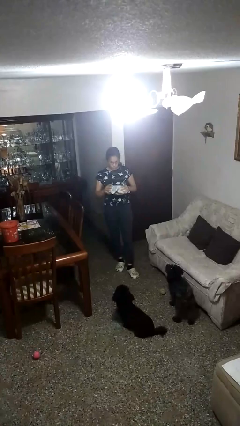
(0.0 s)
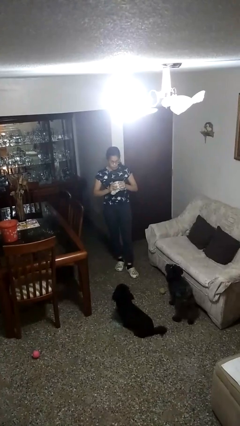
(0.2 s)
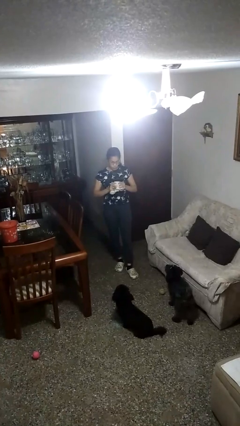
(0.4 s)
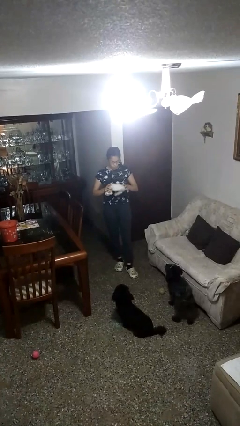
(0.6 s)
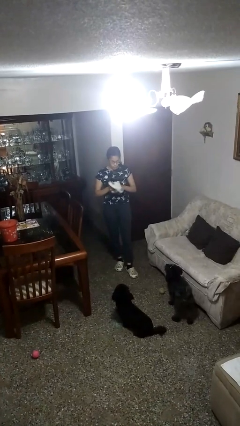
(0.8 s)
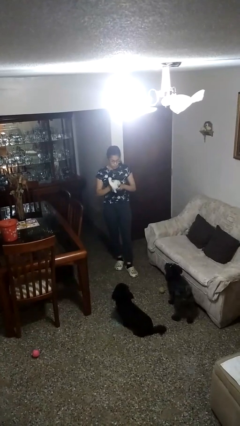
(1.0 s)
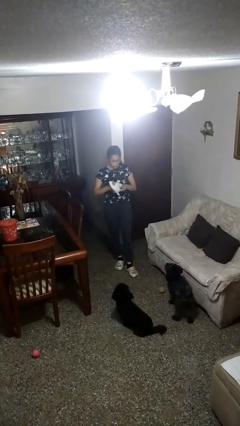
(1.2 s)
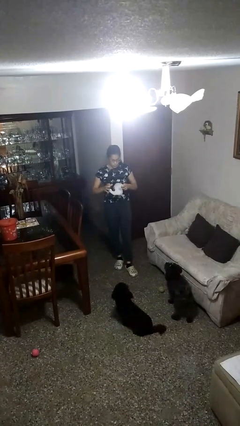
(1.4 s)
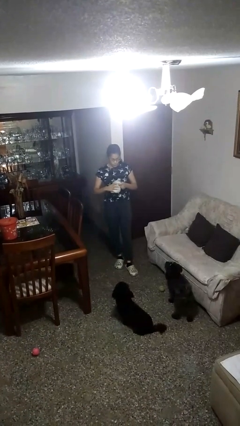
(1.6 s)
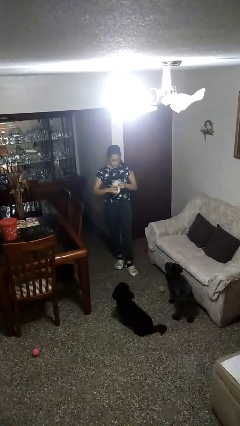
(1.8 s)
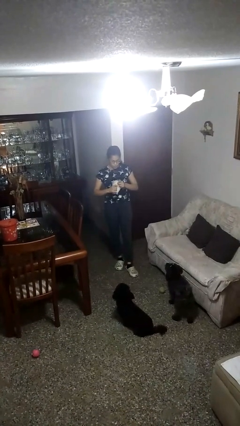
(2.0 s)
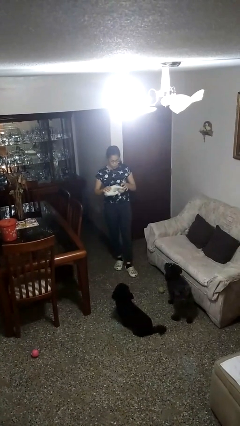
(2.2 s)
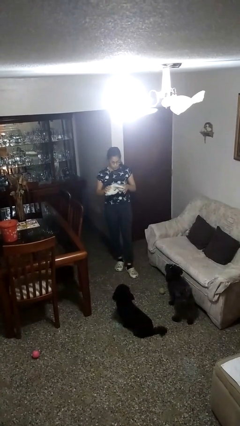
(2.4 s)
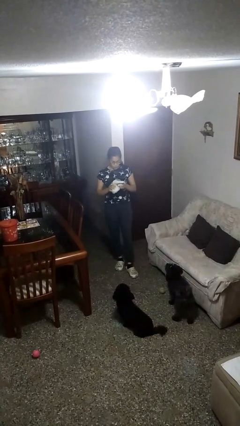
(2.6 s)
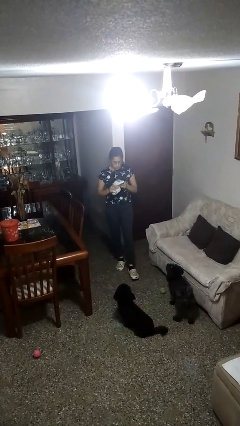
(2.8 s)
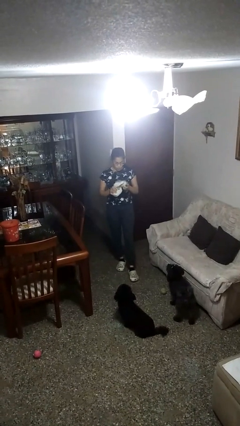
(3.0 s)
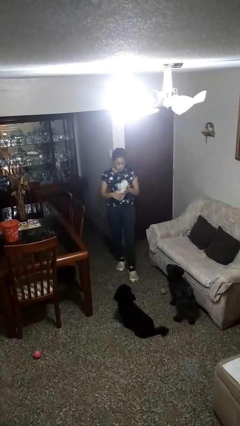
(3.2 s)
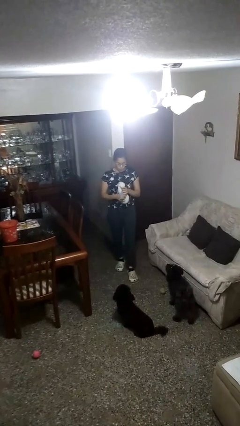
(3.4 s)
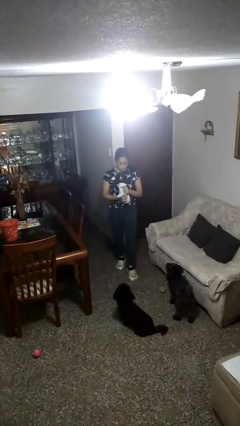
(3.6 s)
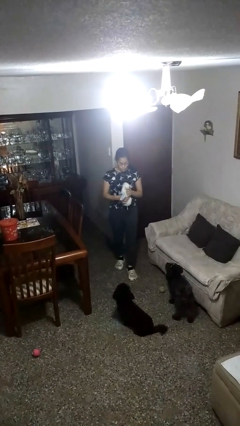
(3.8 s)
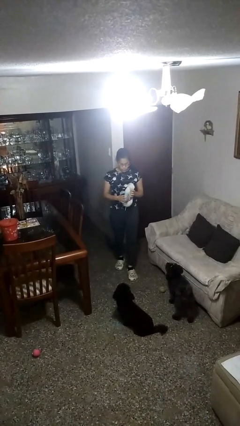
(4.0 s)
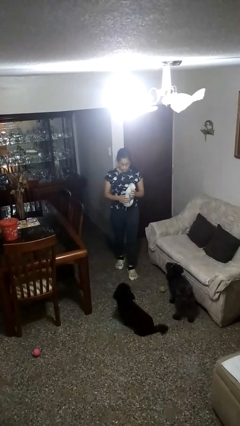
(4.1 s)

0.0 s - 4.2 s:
person squeezes object

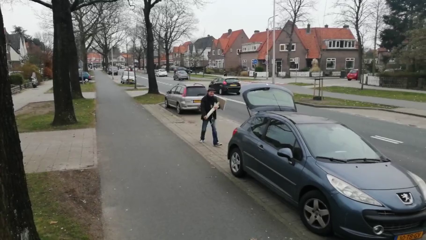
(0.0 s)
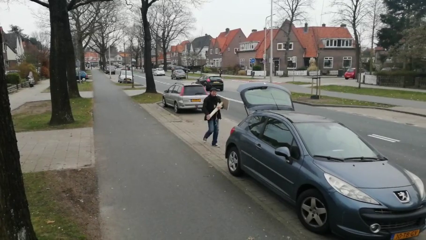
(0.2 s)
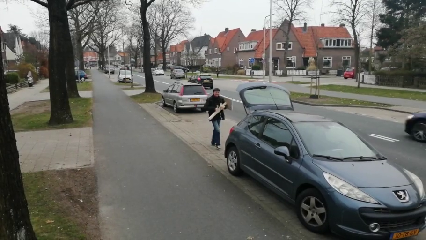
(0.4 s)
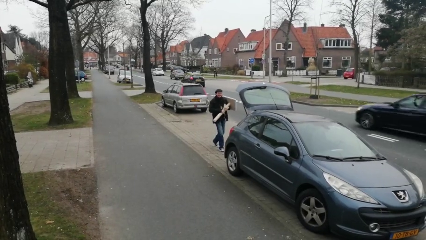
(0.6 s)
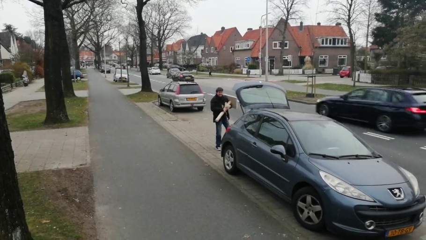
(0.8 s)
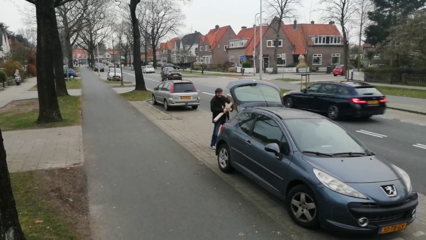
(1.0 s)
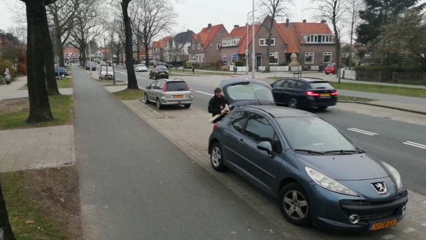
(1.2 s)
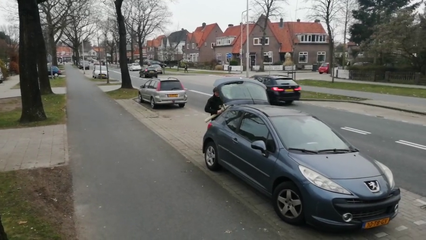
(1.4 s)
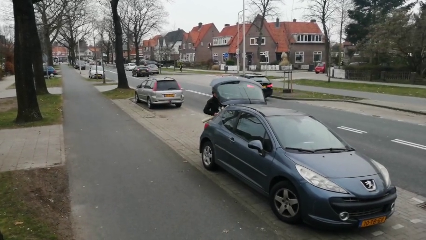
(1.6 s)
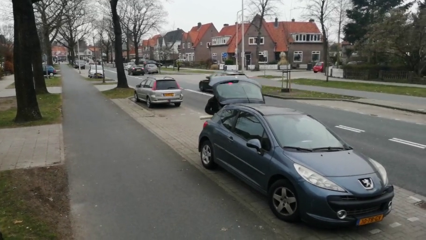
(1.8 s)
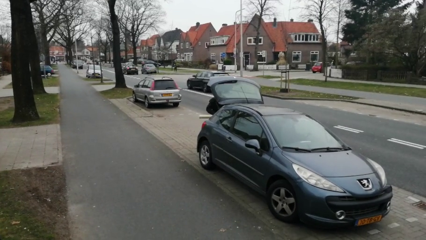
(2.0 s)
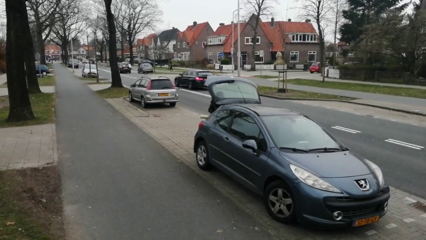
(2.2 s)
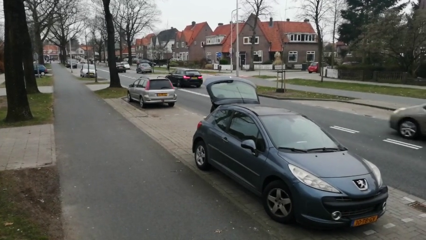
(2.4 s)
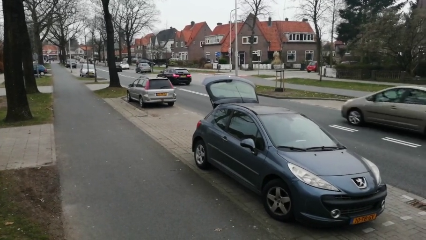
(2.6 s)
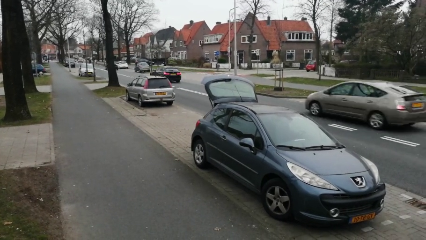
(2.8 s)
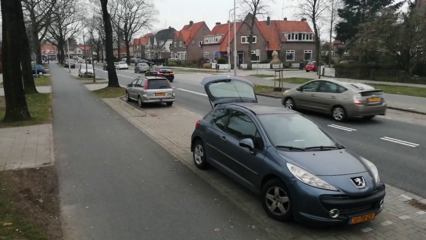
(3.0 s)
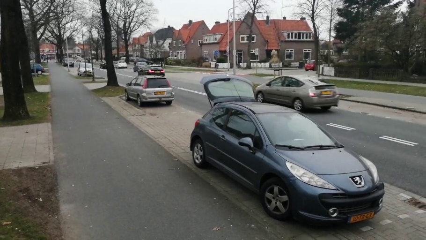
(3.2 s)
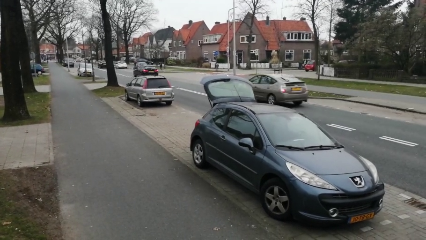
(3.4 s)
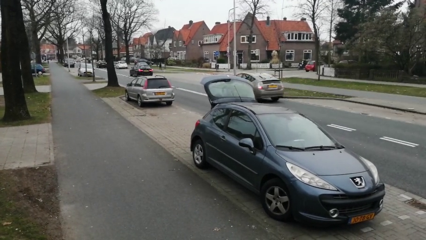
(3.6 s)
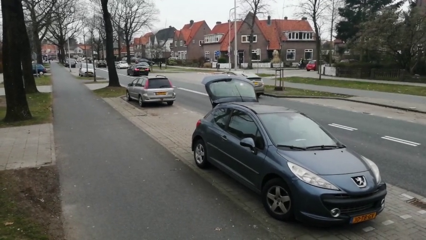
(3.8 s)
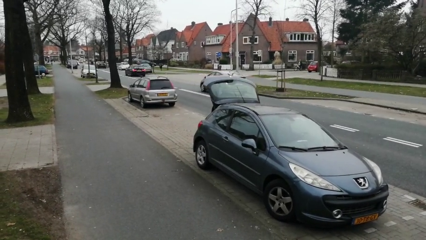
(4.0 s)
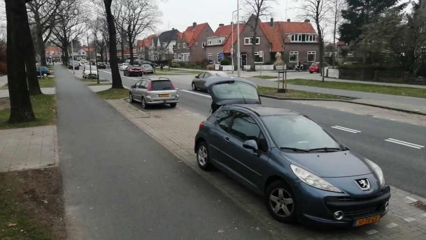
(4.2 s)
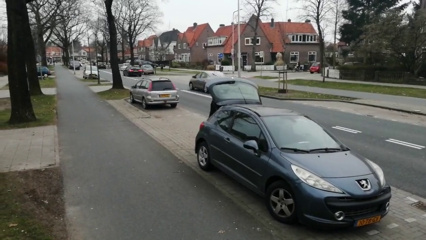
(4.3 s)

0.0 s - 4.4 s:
person loads car

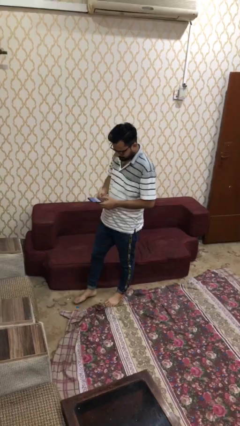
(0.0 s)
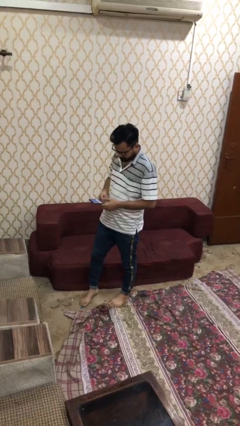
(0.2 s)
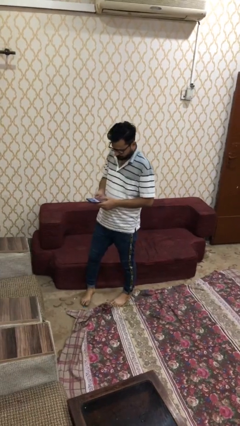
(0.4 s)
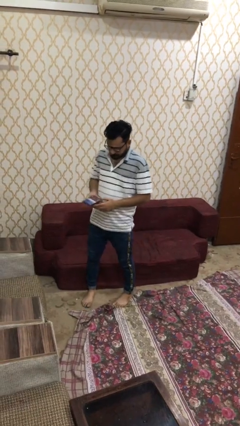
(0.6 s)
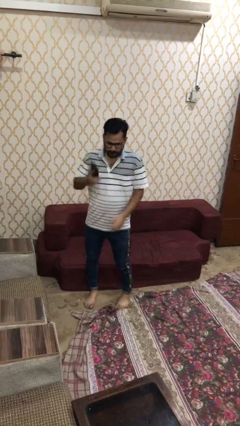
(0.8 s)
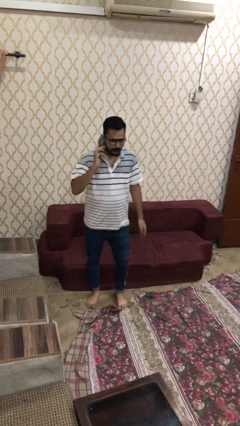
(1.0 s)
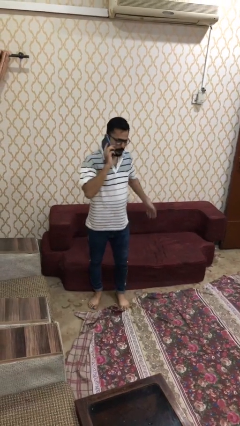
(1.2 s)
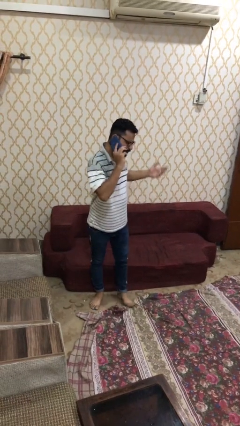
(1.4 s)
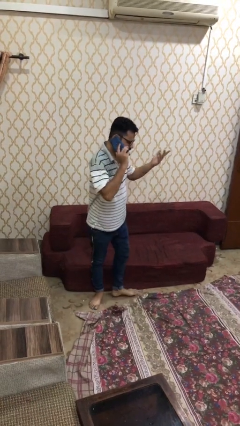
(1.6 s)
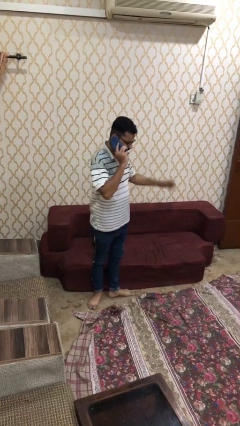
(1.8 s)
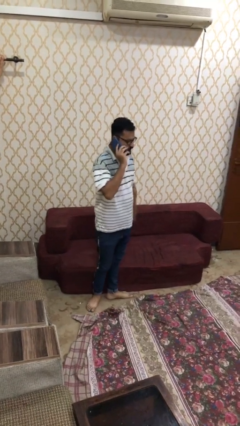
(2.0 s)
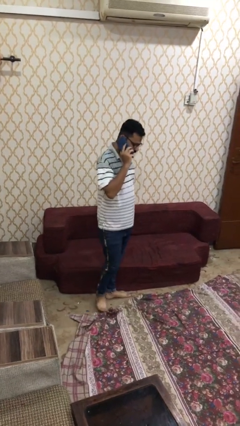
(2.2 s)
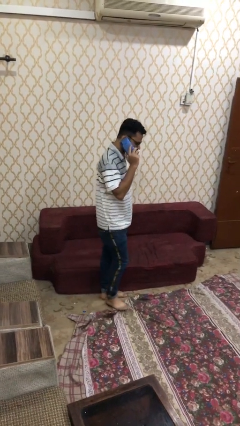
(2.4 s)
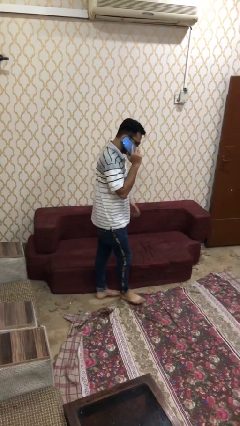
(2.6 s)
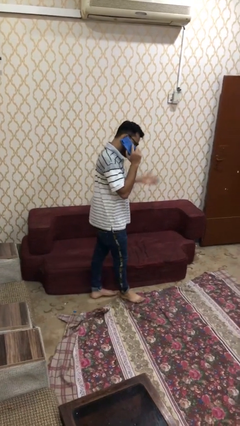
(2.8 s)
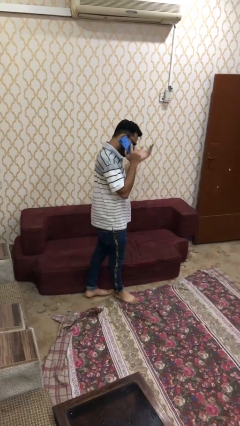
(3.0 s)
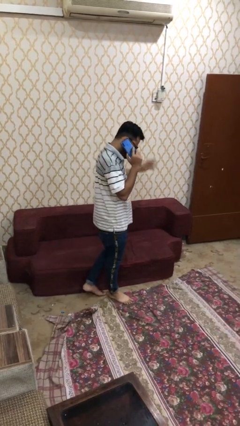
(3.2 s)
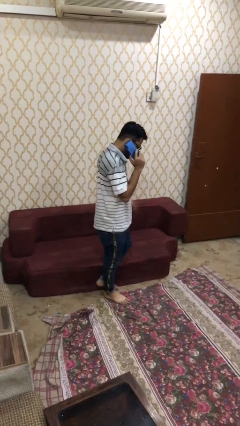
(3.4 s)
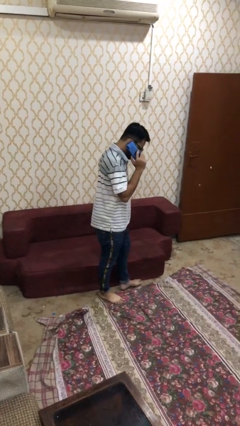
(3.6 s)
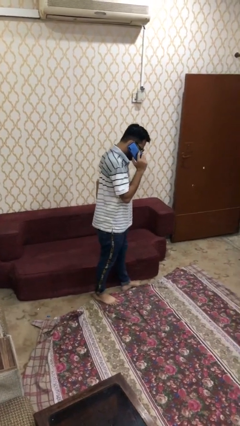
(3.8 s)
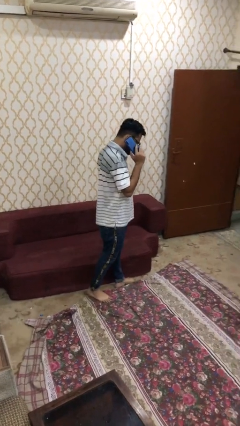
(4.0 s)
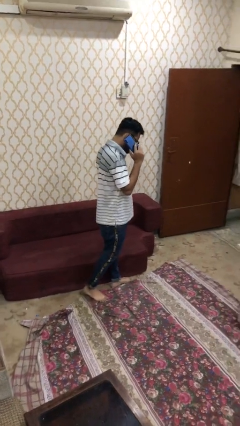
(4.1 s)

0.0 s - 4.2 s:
person talks on phone

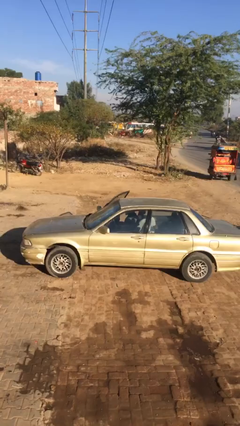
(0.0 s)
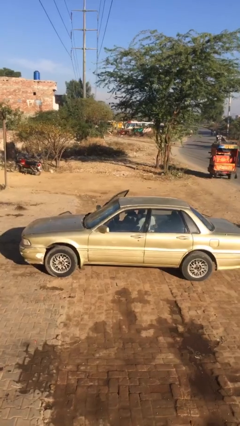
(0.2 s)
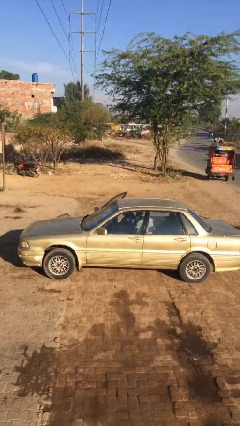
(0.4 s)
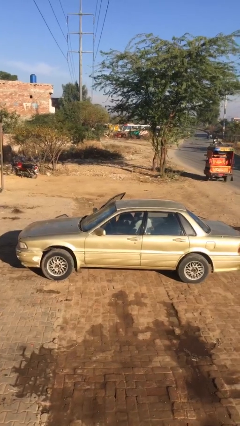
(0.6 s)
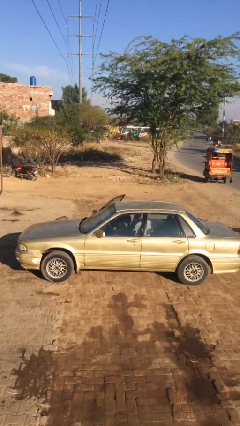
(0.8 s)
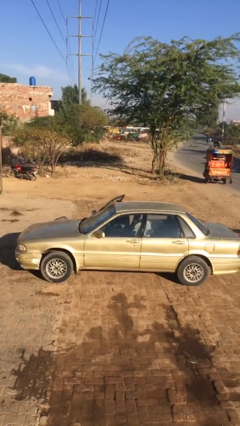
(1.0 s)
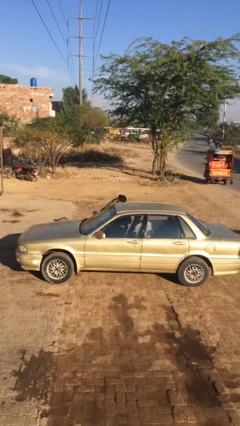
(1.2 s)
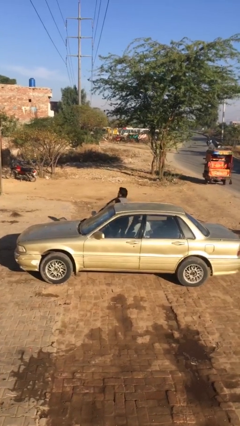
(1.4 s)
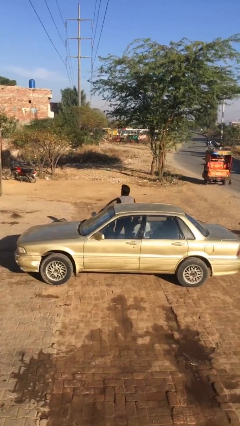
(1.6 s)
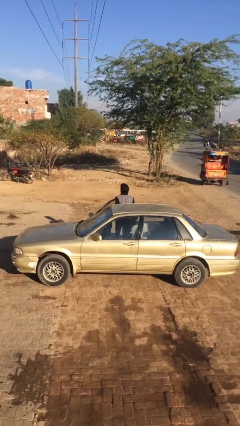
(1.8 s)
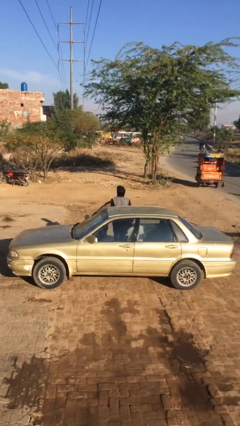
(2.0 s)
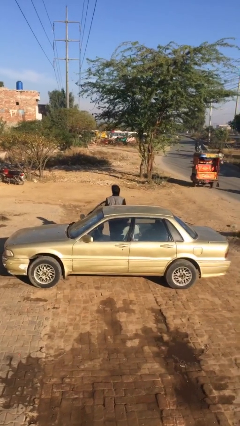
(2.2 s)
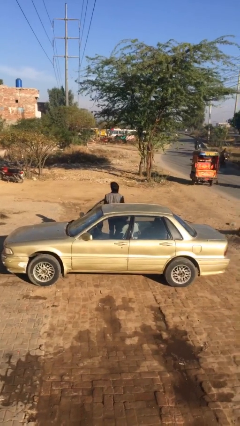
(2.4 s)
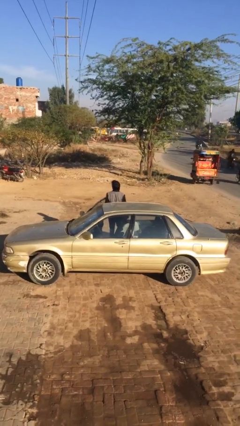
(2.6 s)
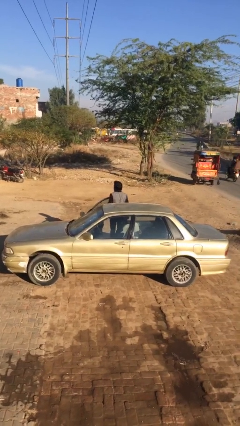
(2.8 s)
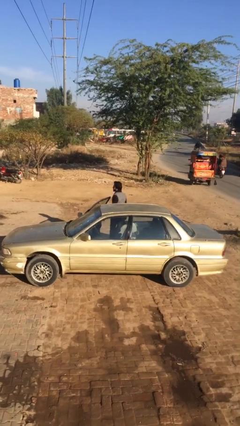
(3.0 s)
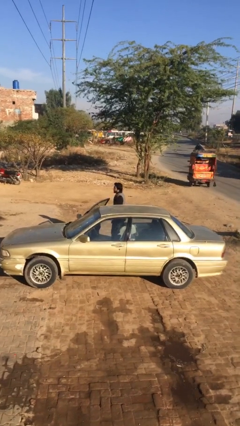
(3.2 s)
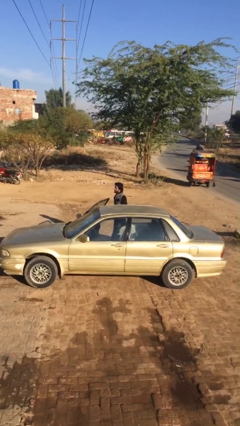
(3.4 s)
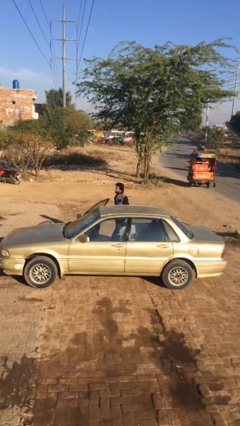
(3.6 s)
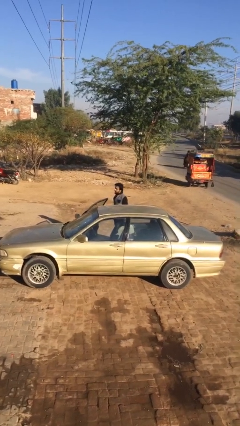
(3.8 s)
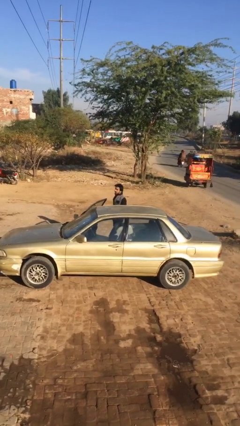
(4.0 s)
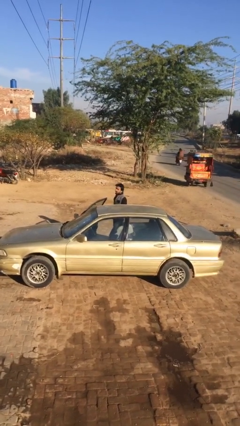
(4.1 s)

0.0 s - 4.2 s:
person exits car

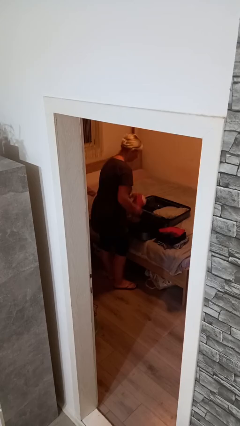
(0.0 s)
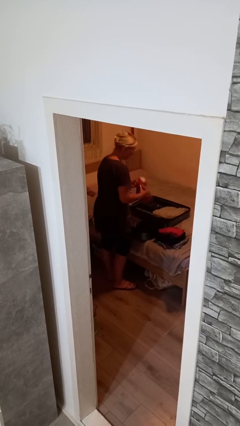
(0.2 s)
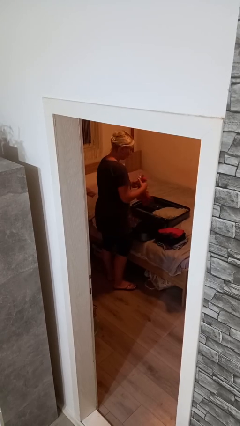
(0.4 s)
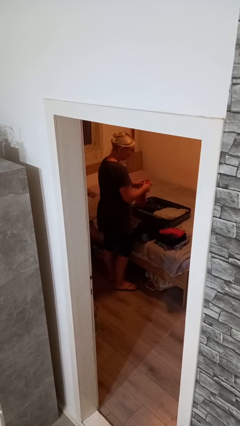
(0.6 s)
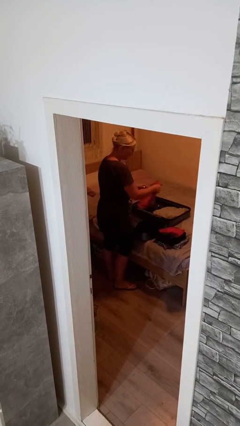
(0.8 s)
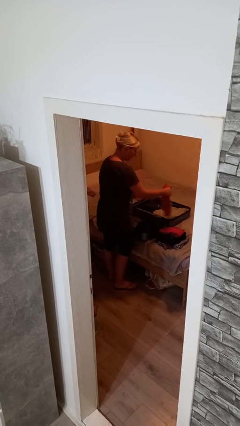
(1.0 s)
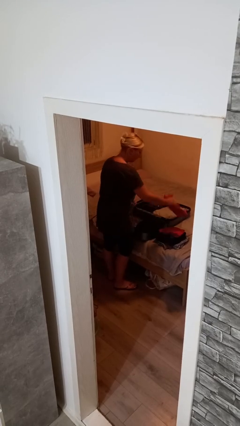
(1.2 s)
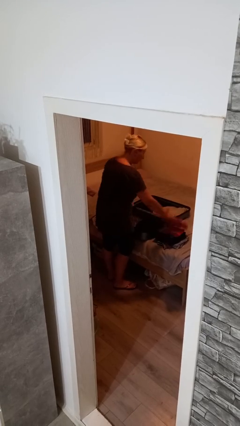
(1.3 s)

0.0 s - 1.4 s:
person unloads clothes from suitcase
